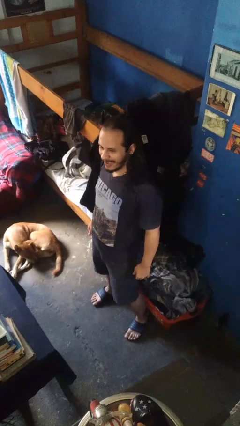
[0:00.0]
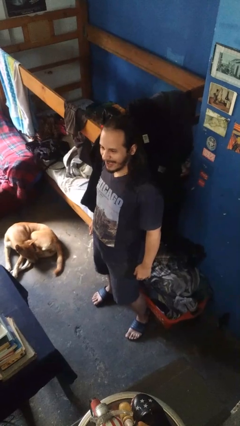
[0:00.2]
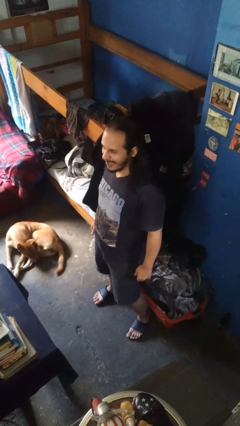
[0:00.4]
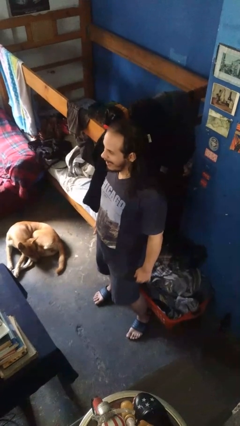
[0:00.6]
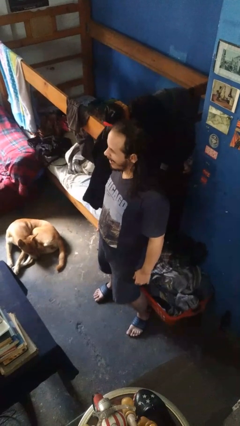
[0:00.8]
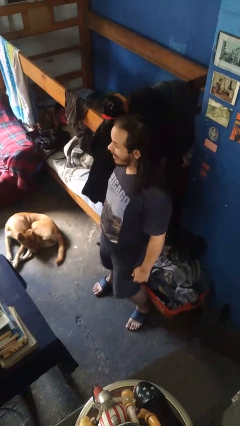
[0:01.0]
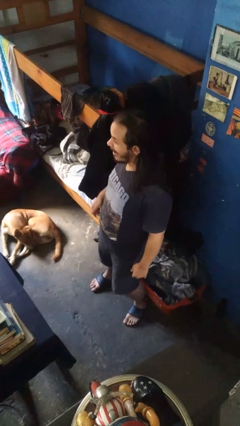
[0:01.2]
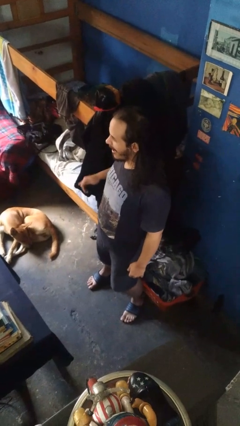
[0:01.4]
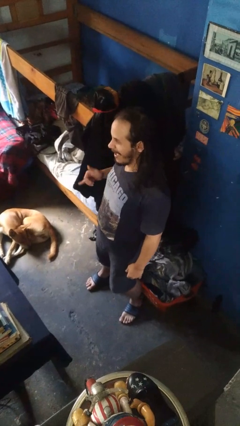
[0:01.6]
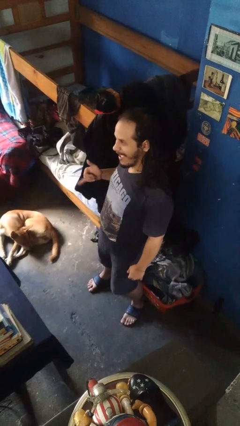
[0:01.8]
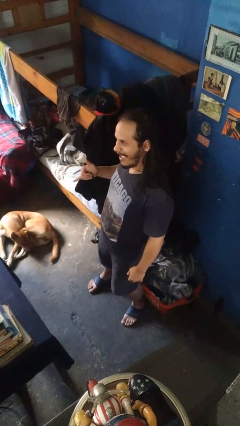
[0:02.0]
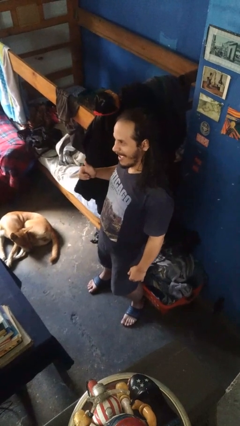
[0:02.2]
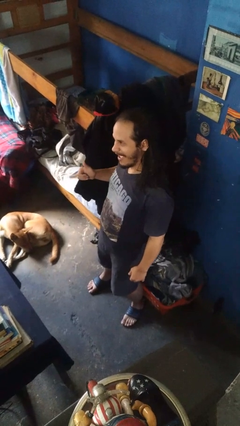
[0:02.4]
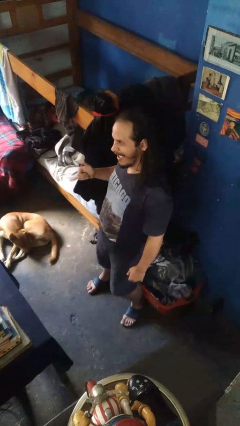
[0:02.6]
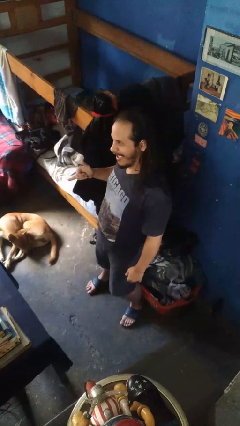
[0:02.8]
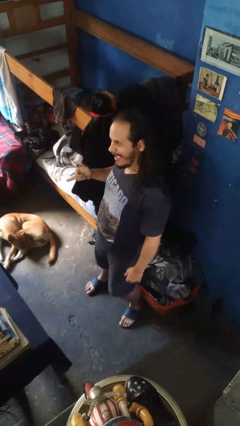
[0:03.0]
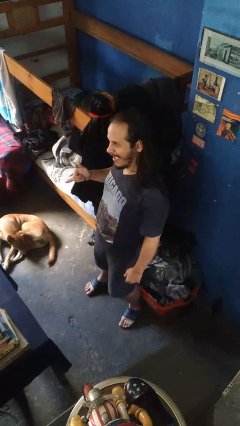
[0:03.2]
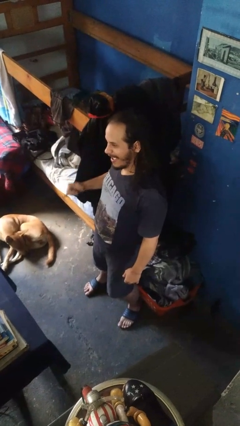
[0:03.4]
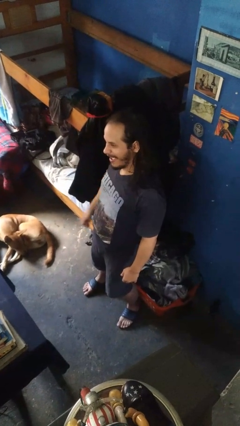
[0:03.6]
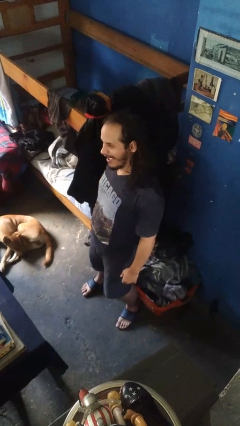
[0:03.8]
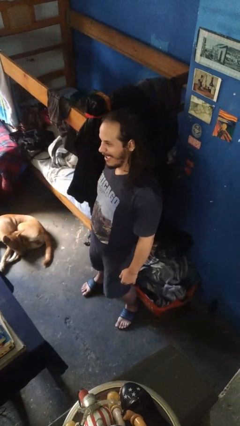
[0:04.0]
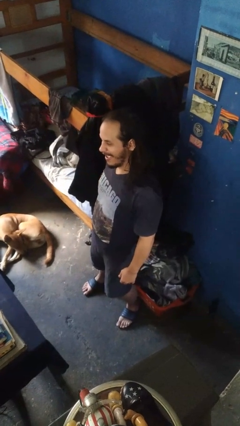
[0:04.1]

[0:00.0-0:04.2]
person gestures hang loose

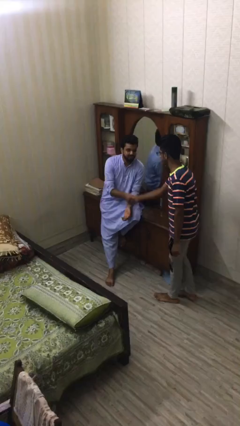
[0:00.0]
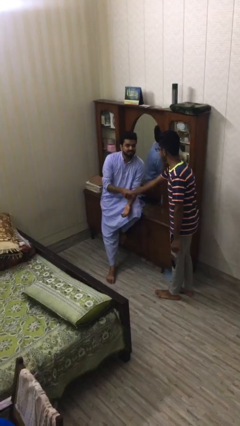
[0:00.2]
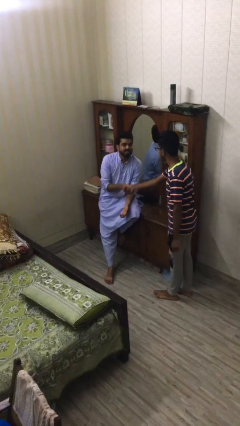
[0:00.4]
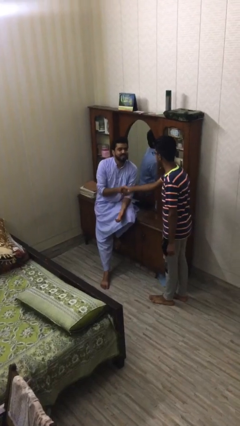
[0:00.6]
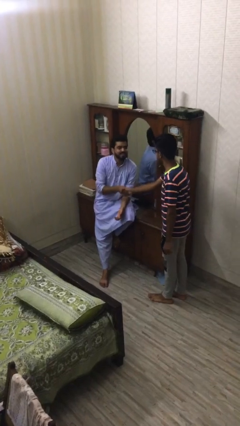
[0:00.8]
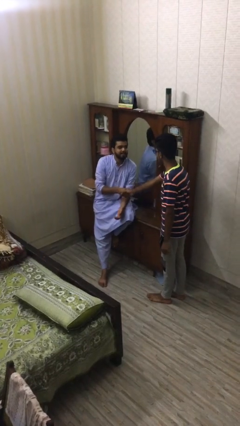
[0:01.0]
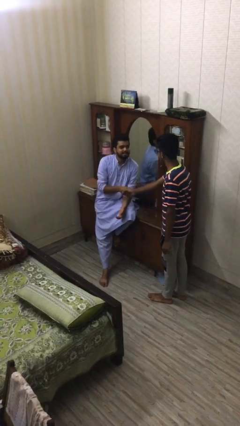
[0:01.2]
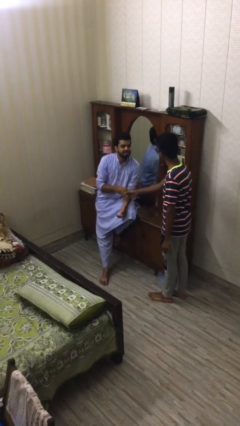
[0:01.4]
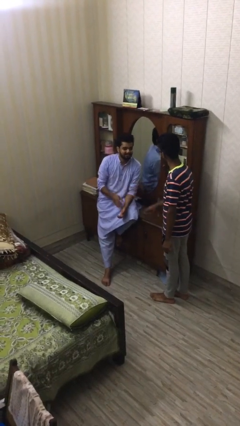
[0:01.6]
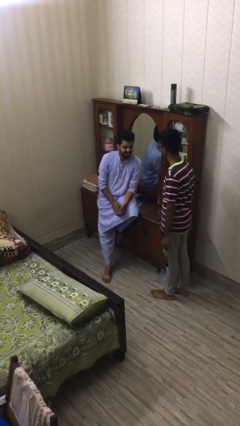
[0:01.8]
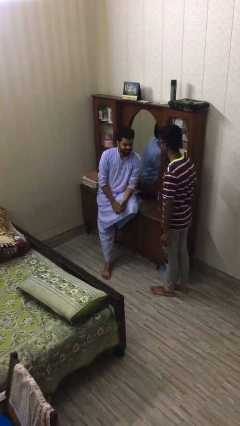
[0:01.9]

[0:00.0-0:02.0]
person shakes hand

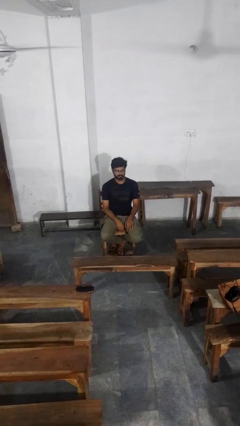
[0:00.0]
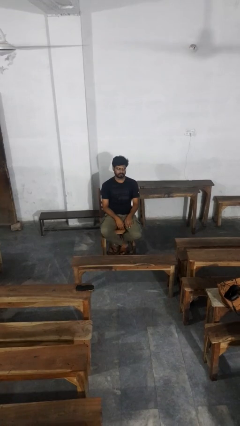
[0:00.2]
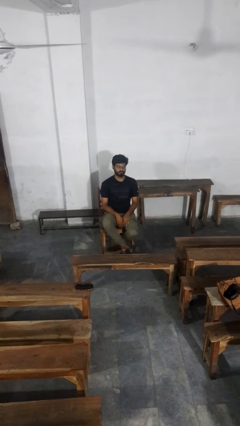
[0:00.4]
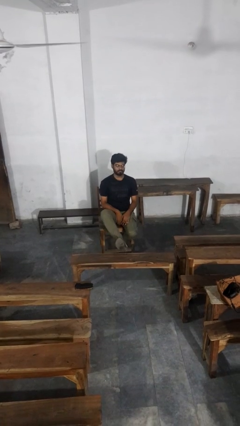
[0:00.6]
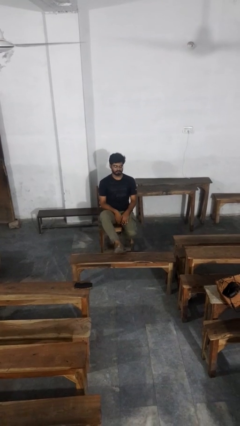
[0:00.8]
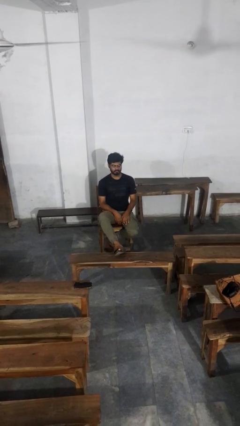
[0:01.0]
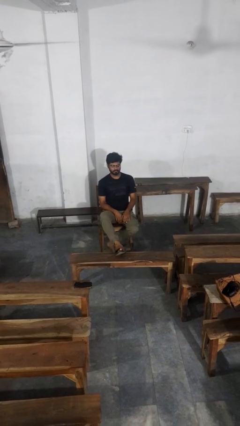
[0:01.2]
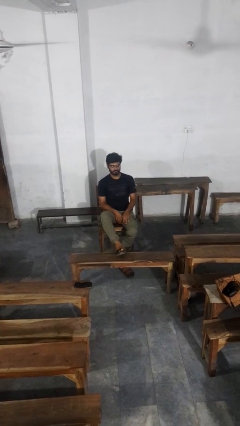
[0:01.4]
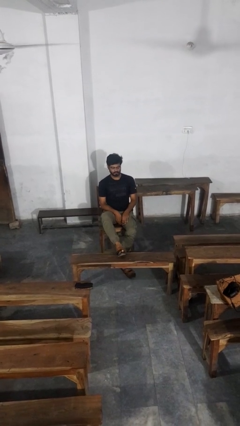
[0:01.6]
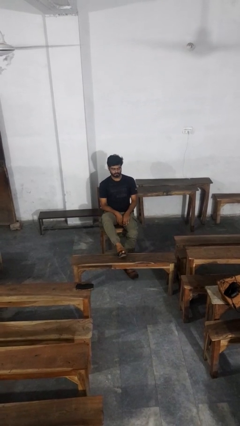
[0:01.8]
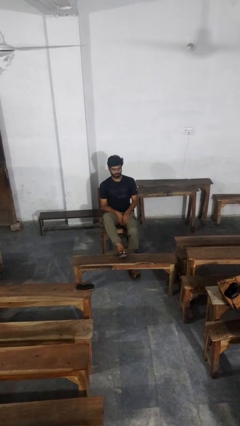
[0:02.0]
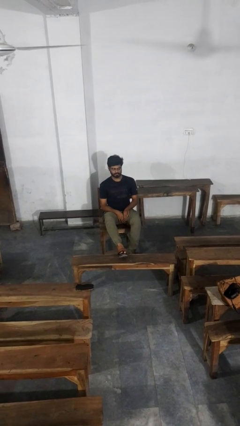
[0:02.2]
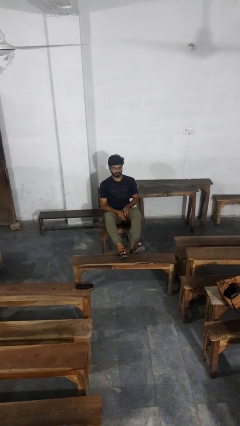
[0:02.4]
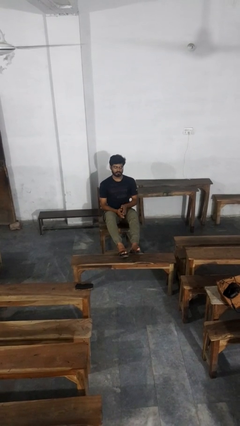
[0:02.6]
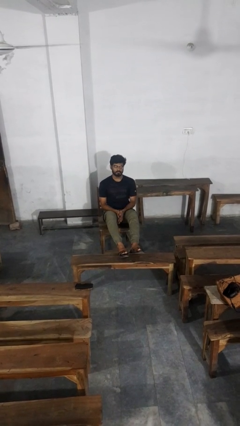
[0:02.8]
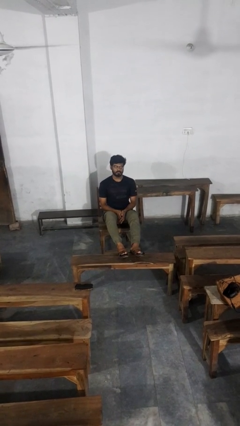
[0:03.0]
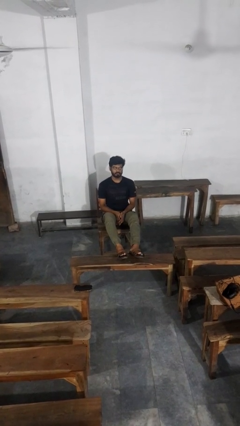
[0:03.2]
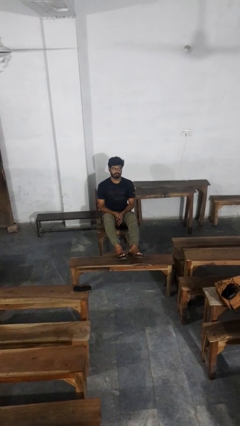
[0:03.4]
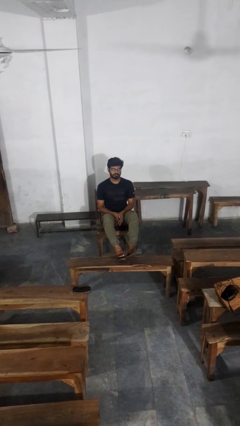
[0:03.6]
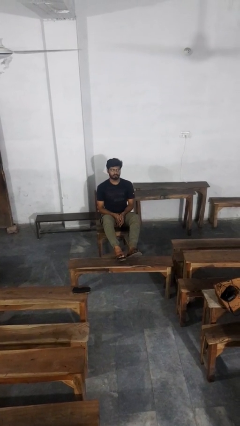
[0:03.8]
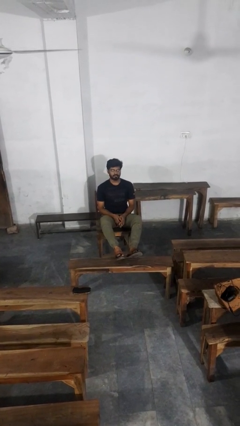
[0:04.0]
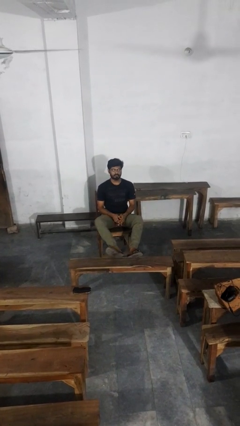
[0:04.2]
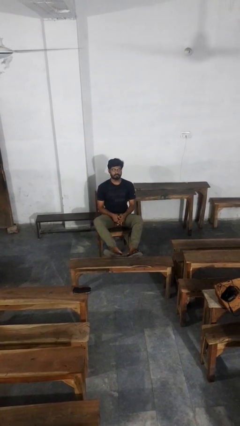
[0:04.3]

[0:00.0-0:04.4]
person puts feet up

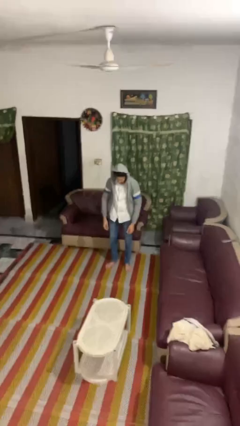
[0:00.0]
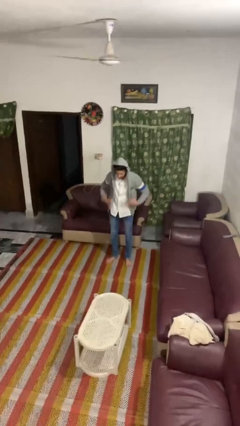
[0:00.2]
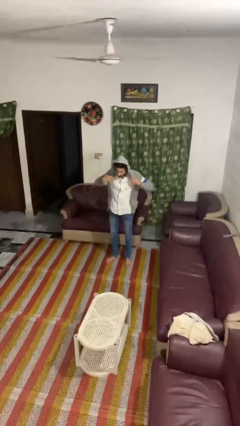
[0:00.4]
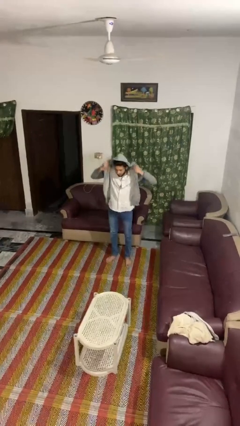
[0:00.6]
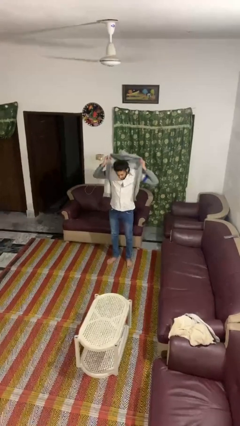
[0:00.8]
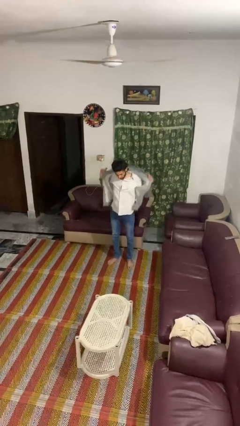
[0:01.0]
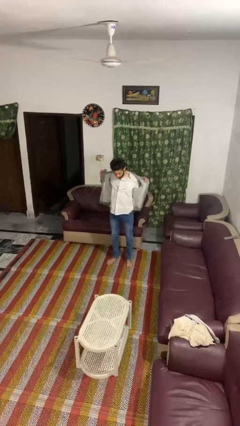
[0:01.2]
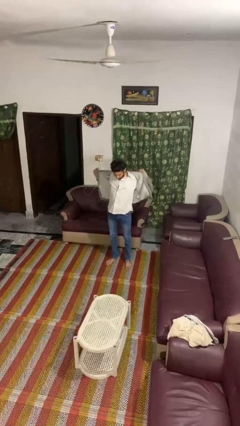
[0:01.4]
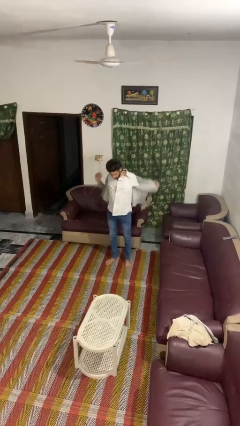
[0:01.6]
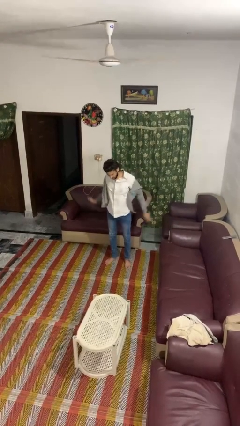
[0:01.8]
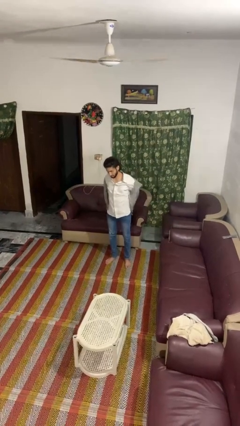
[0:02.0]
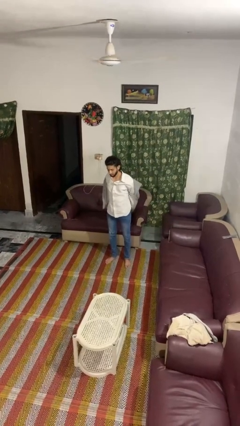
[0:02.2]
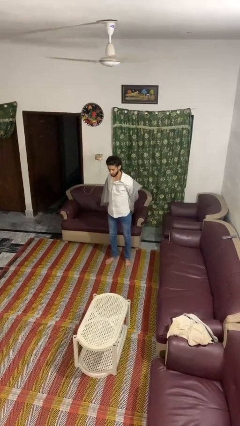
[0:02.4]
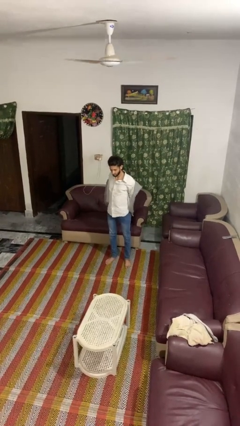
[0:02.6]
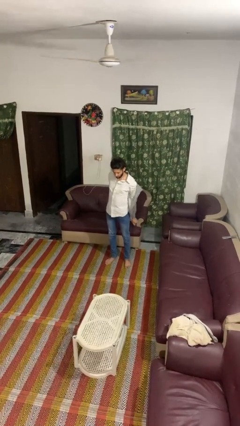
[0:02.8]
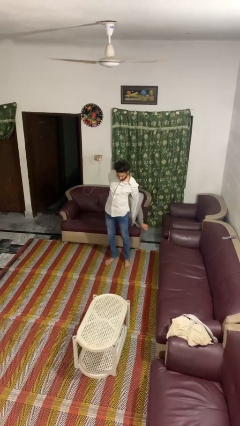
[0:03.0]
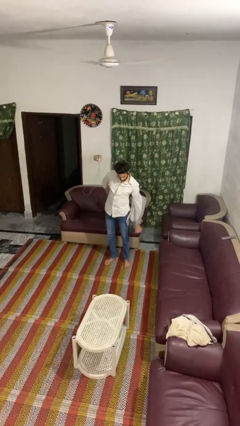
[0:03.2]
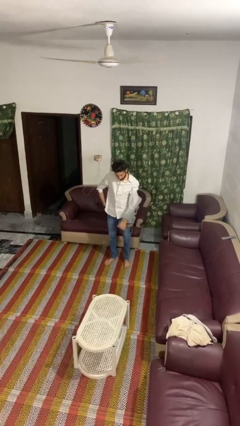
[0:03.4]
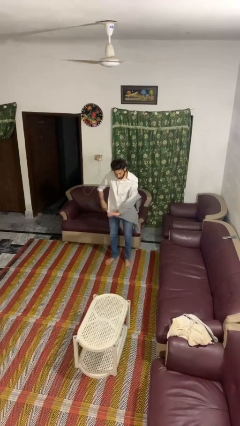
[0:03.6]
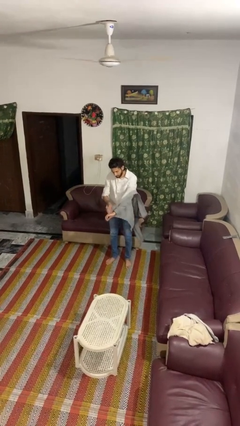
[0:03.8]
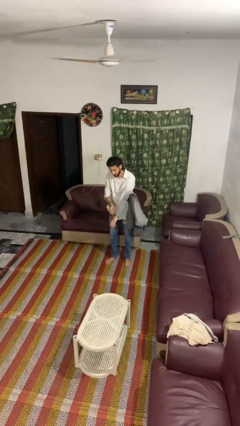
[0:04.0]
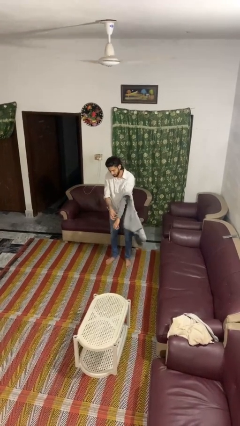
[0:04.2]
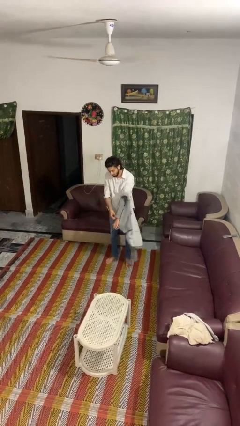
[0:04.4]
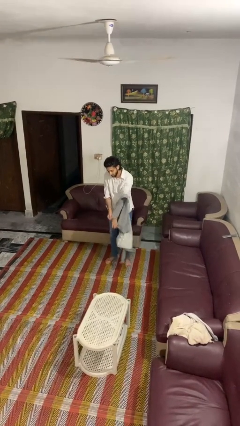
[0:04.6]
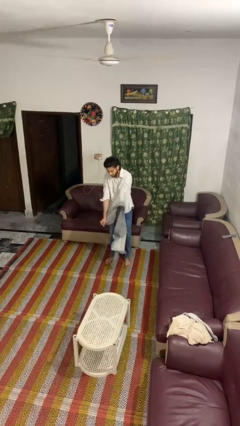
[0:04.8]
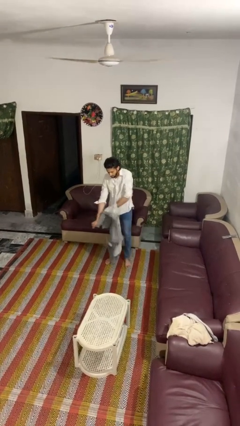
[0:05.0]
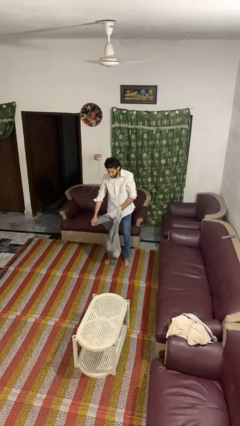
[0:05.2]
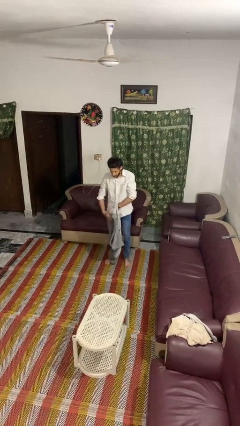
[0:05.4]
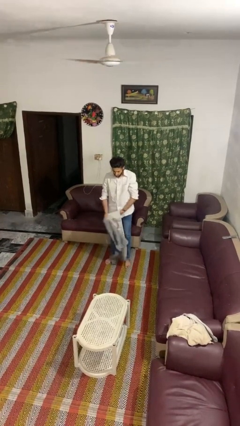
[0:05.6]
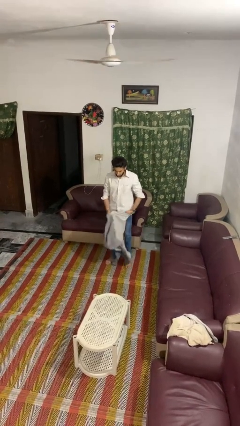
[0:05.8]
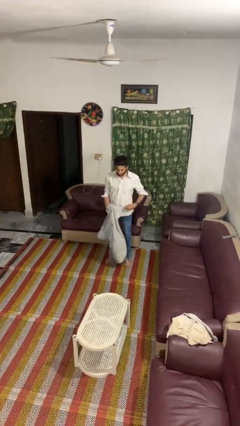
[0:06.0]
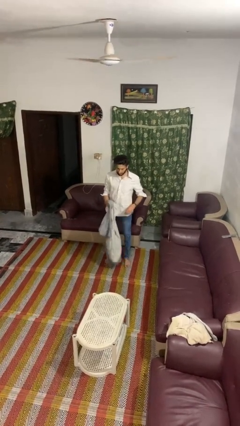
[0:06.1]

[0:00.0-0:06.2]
person takes off hoodie

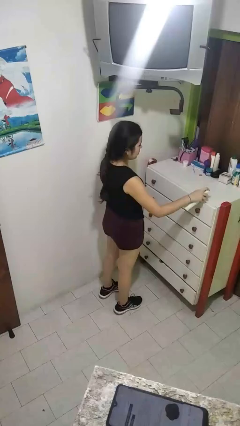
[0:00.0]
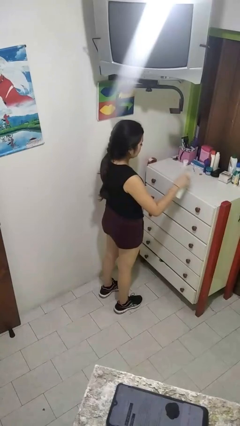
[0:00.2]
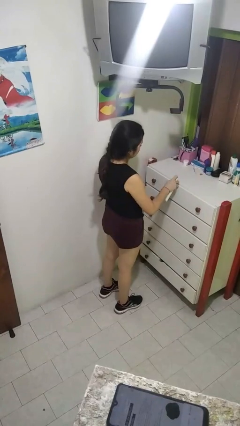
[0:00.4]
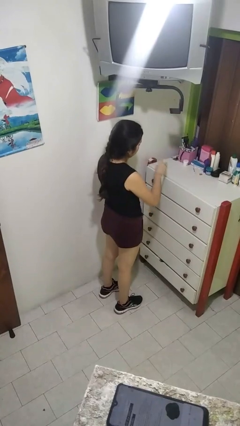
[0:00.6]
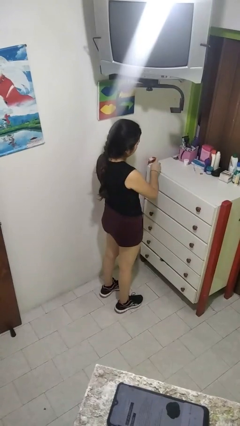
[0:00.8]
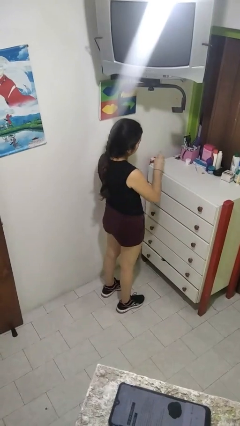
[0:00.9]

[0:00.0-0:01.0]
person sprays from bottle
